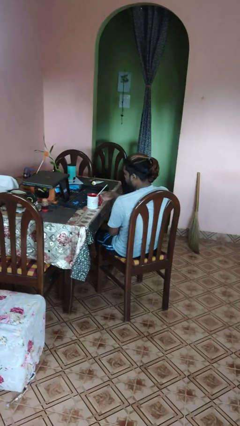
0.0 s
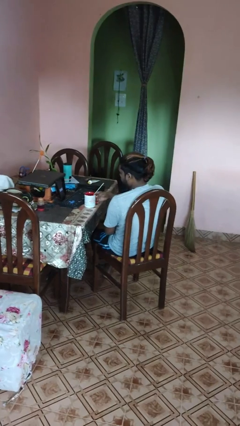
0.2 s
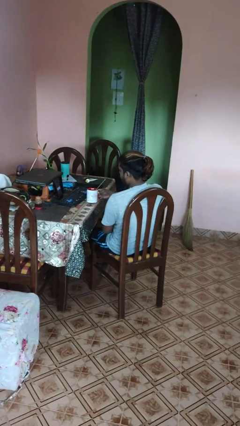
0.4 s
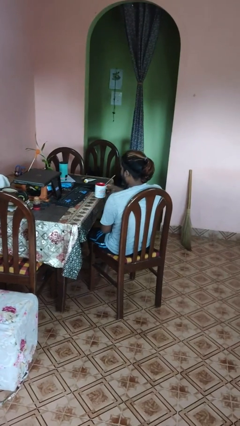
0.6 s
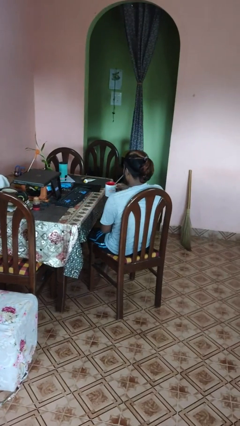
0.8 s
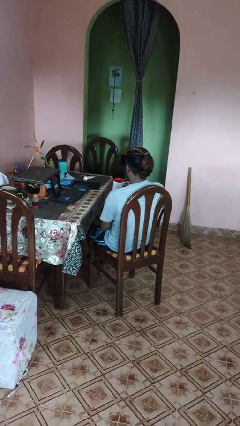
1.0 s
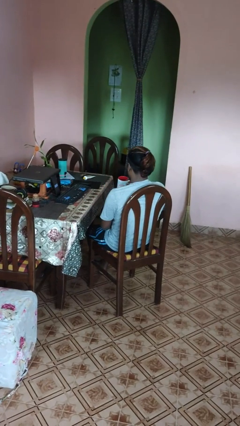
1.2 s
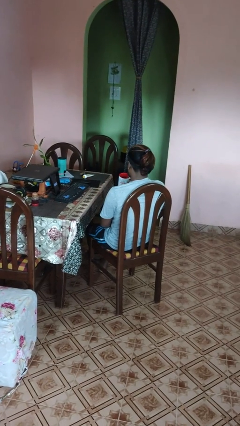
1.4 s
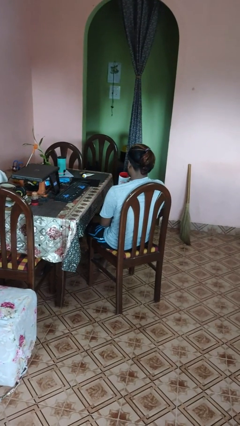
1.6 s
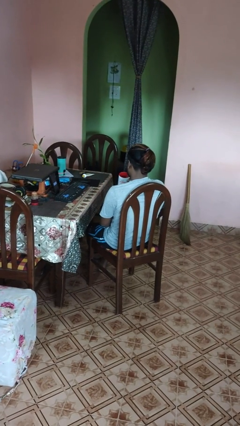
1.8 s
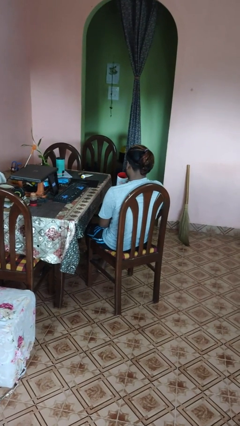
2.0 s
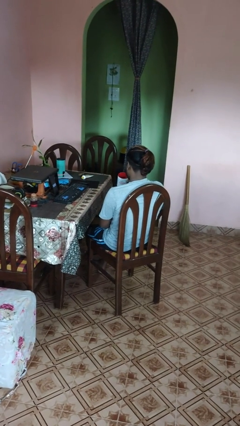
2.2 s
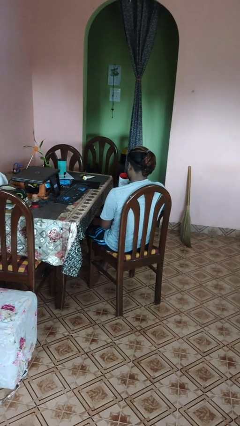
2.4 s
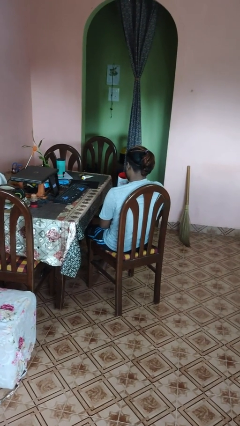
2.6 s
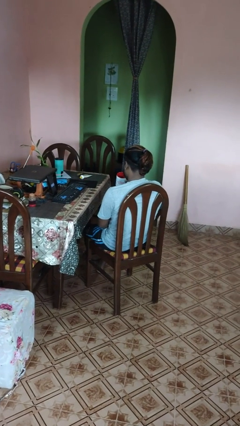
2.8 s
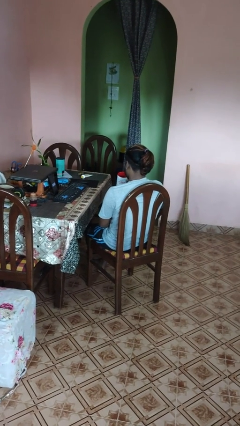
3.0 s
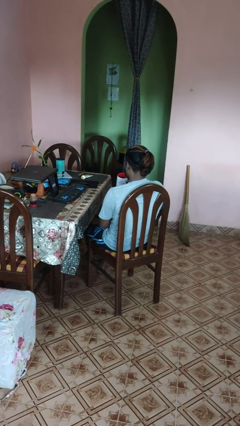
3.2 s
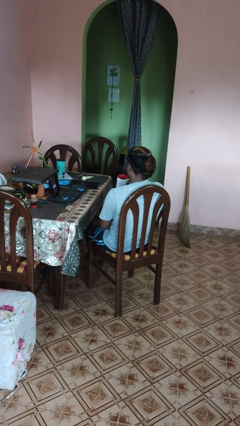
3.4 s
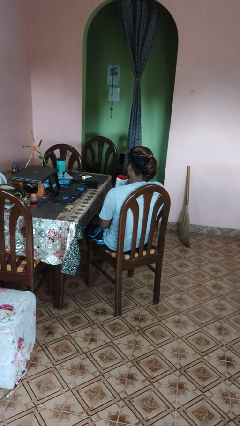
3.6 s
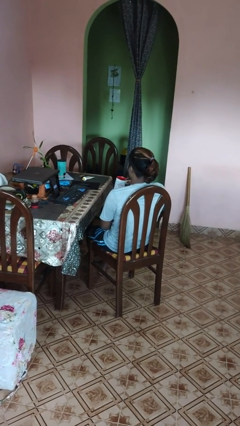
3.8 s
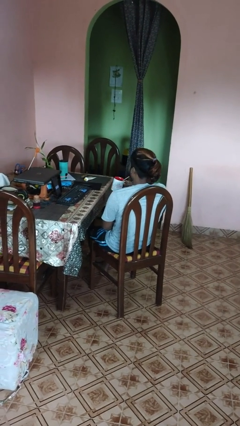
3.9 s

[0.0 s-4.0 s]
person drinks from straw

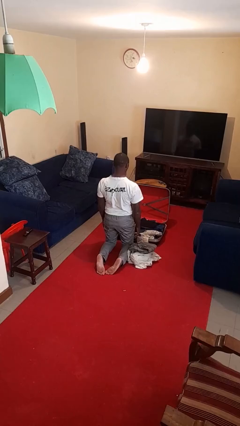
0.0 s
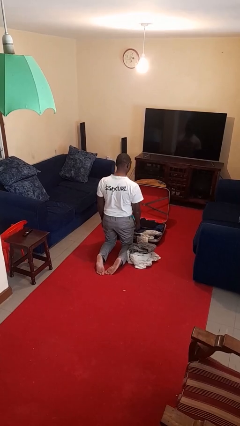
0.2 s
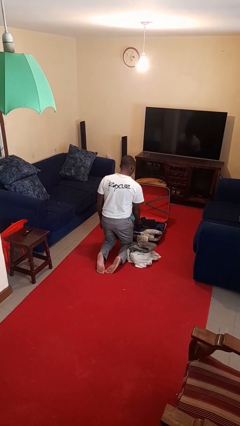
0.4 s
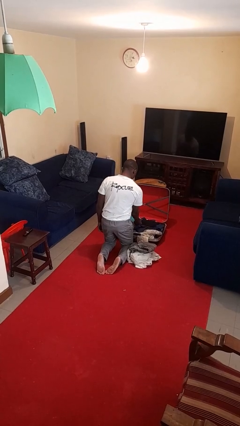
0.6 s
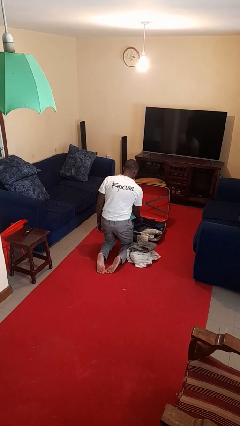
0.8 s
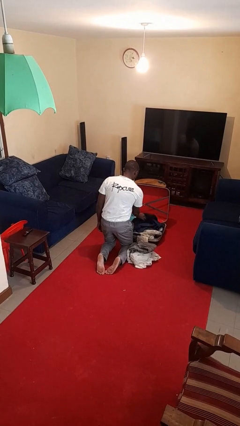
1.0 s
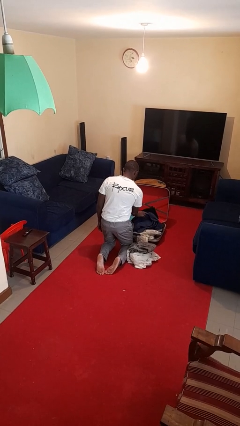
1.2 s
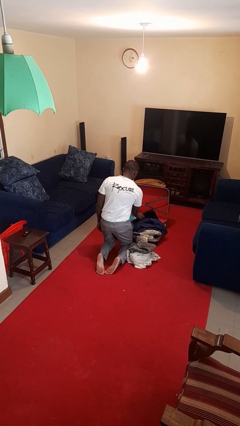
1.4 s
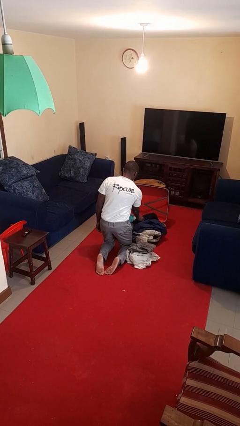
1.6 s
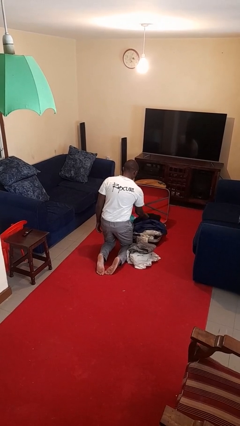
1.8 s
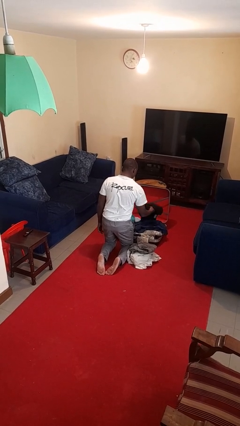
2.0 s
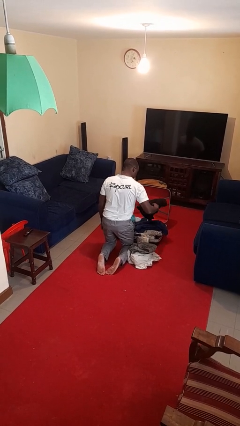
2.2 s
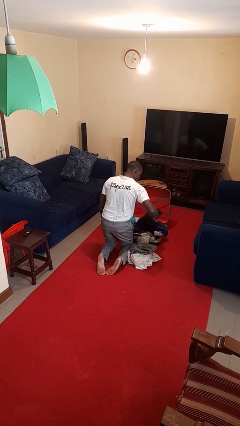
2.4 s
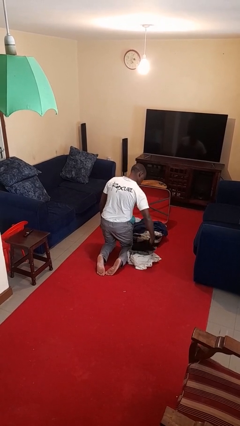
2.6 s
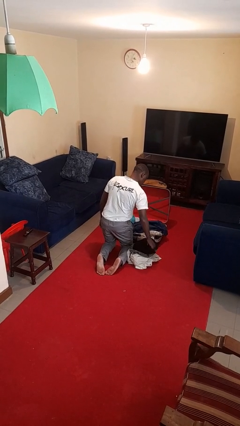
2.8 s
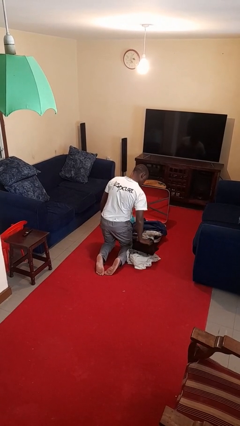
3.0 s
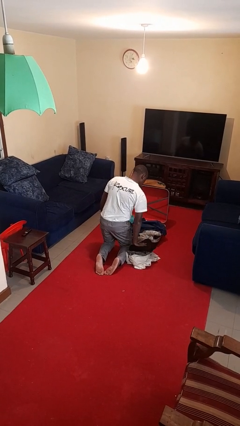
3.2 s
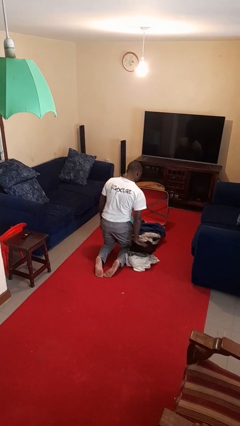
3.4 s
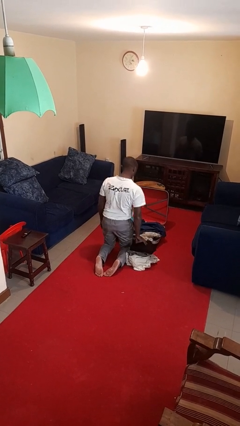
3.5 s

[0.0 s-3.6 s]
person unloads clothes from suitcase

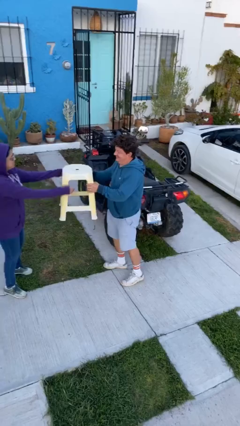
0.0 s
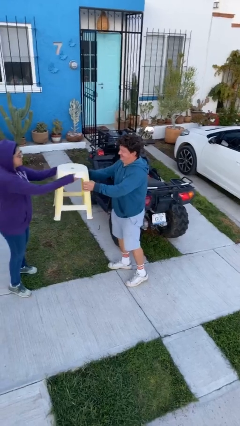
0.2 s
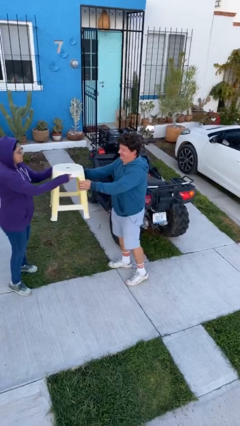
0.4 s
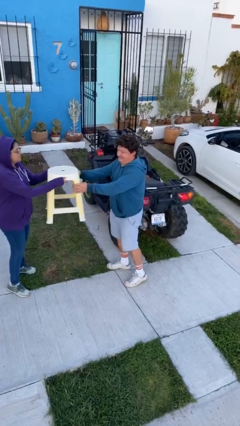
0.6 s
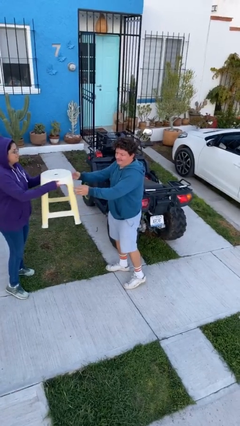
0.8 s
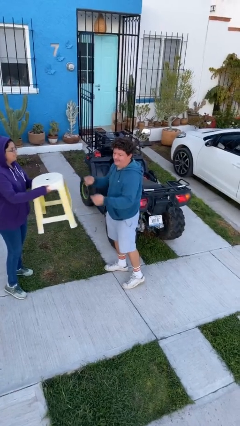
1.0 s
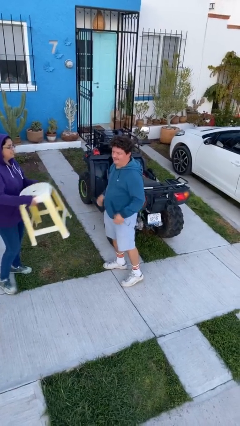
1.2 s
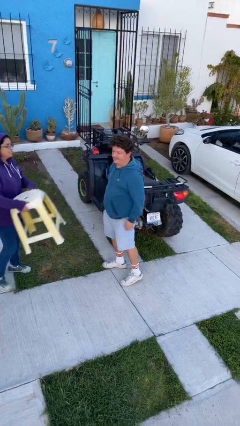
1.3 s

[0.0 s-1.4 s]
person transfers object to person

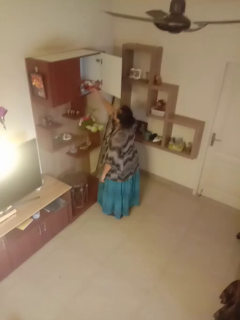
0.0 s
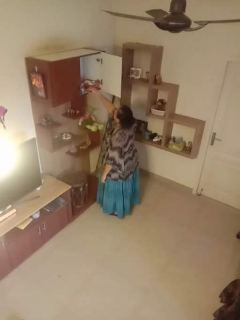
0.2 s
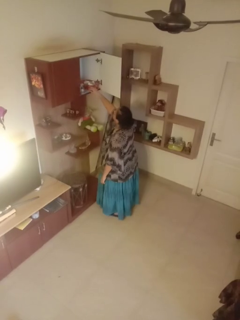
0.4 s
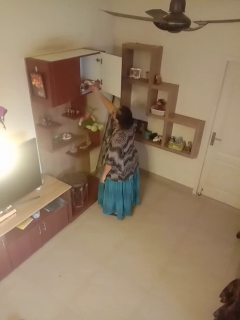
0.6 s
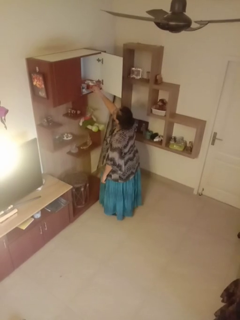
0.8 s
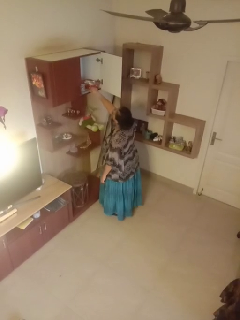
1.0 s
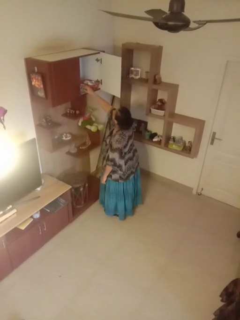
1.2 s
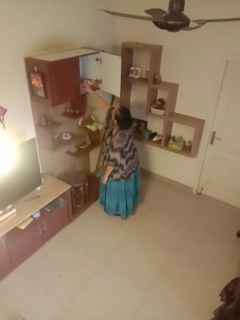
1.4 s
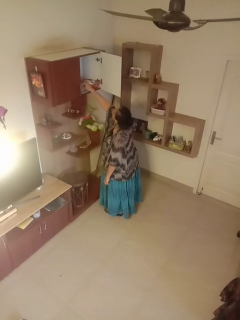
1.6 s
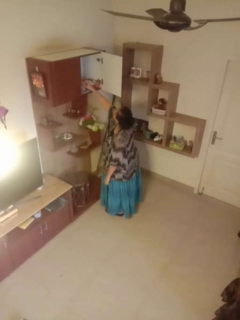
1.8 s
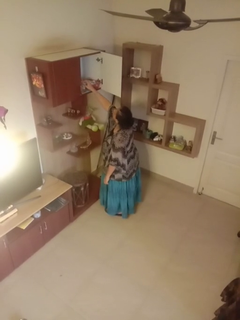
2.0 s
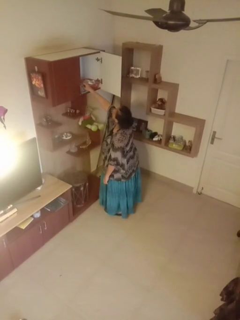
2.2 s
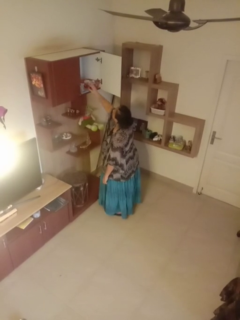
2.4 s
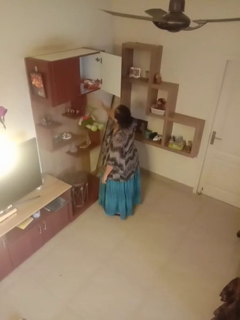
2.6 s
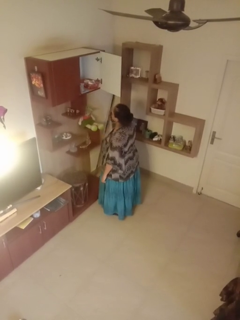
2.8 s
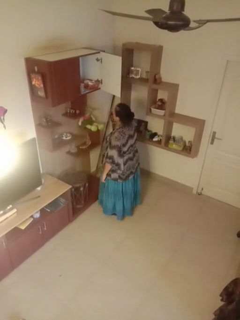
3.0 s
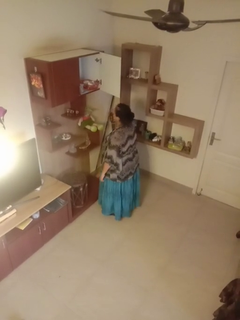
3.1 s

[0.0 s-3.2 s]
person searches in cabinet

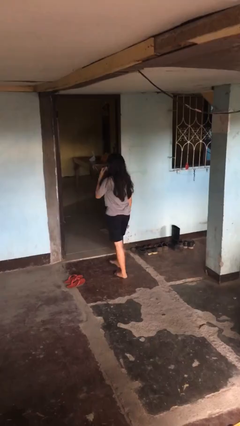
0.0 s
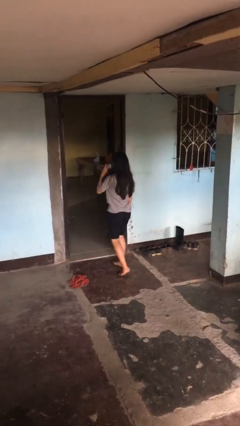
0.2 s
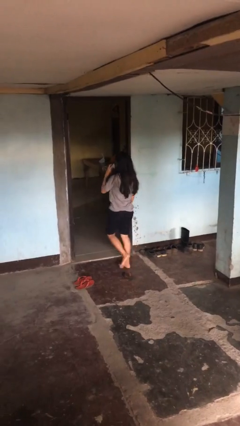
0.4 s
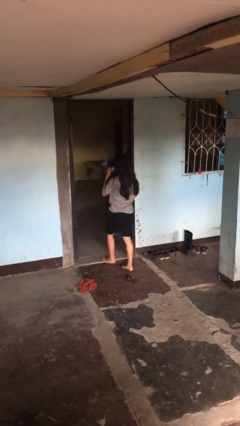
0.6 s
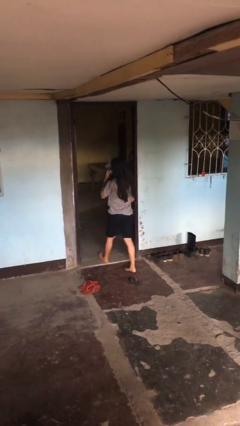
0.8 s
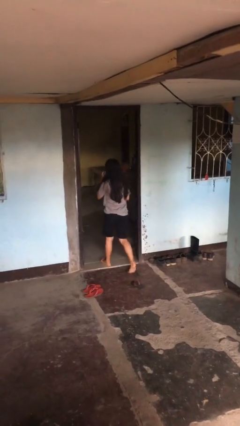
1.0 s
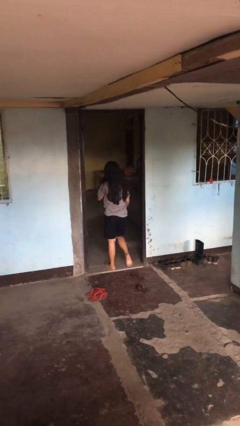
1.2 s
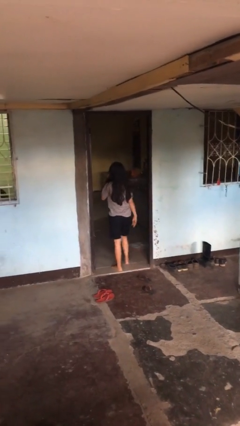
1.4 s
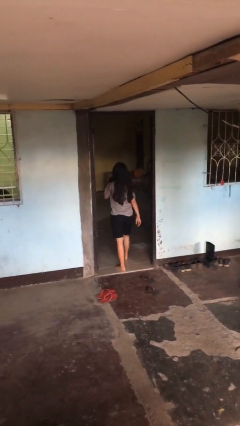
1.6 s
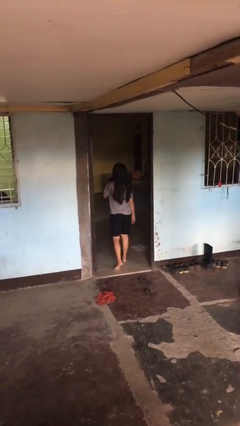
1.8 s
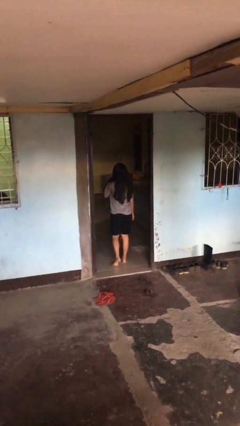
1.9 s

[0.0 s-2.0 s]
person exits scene through structure

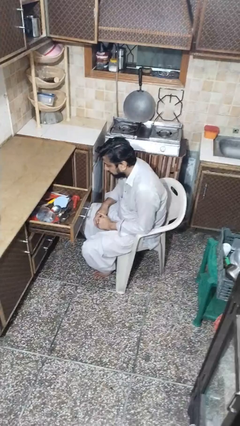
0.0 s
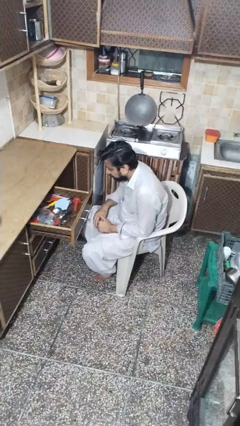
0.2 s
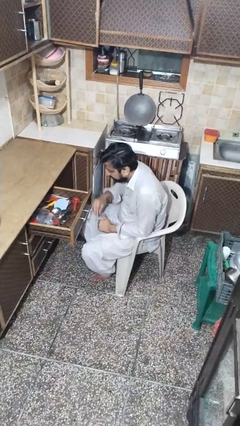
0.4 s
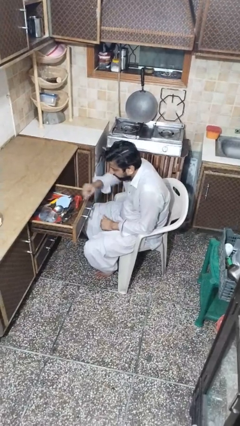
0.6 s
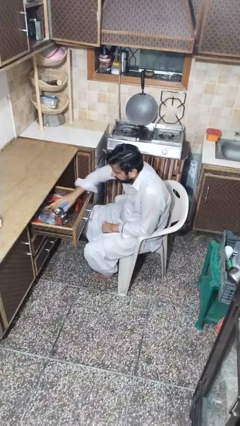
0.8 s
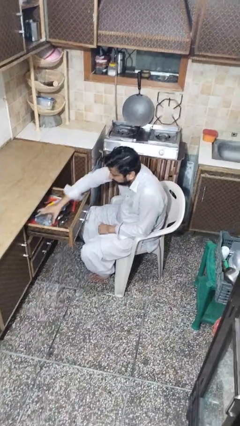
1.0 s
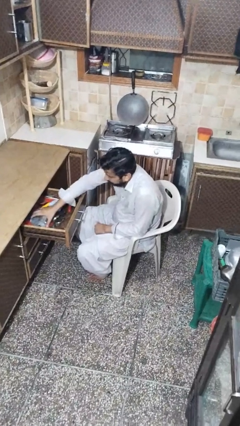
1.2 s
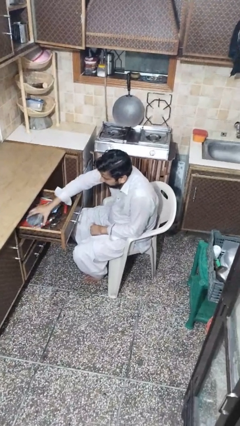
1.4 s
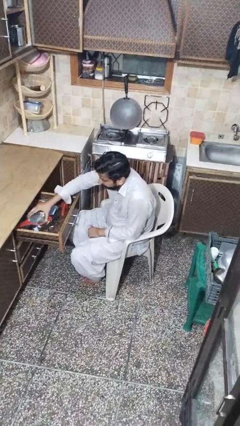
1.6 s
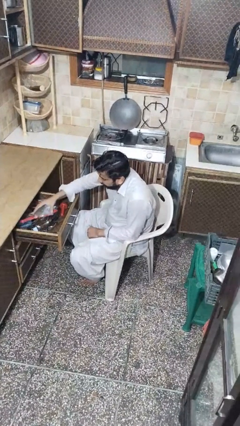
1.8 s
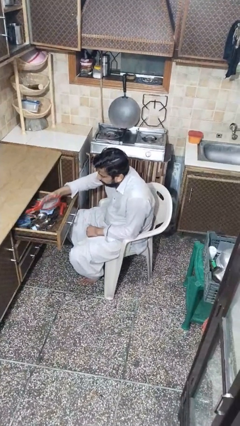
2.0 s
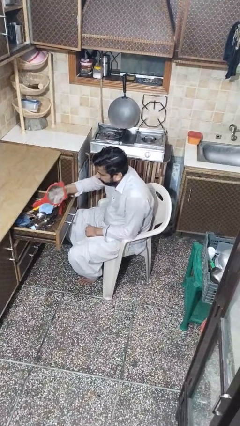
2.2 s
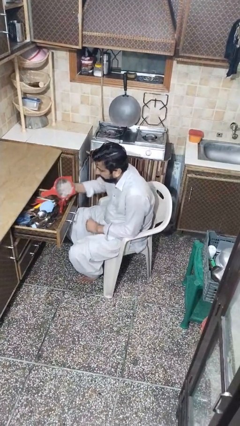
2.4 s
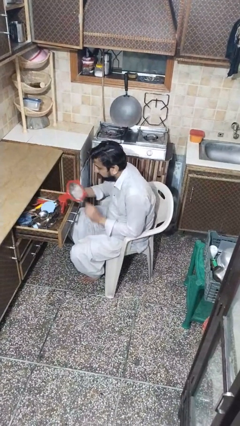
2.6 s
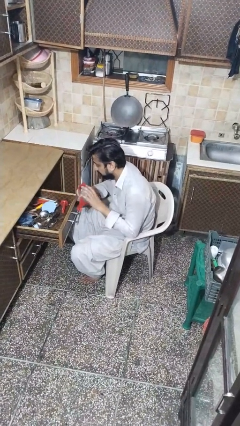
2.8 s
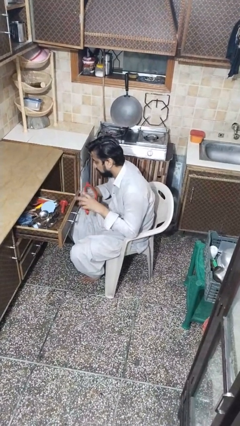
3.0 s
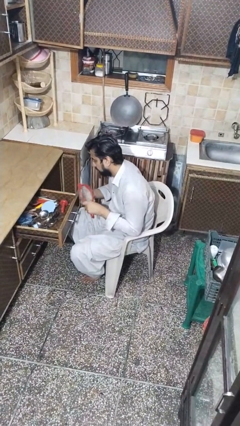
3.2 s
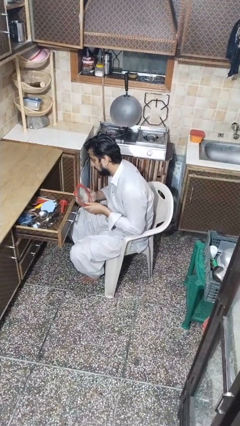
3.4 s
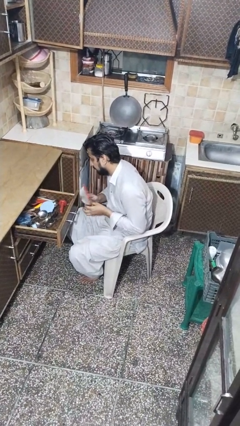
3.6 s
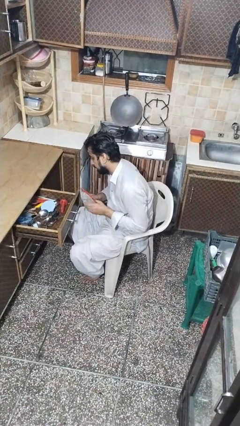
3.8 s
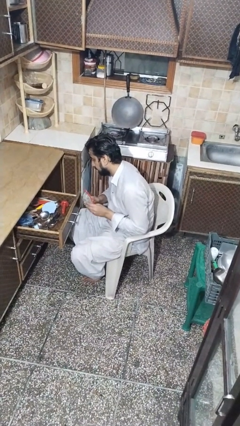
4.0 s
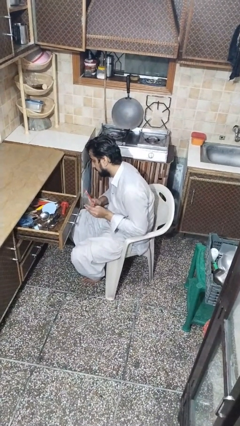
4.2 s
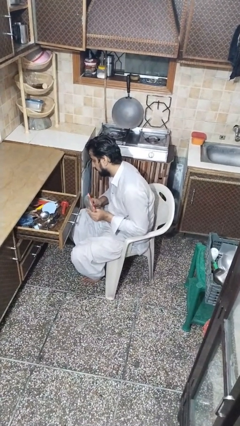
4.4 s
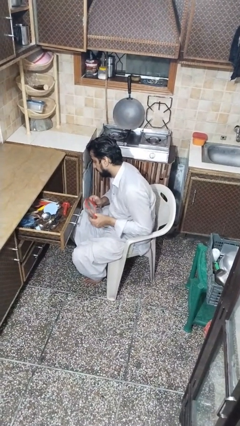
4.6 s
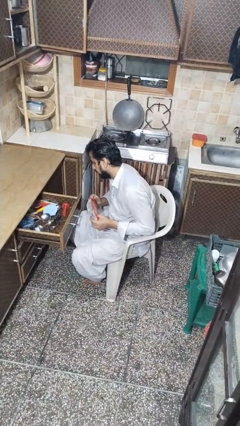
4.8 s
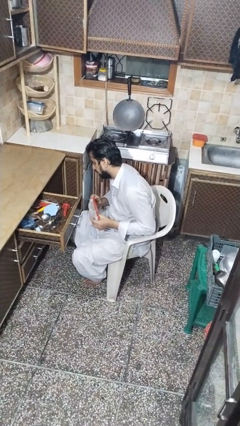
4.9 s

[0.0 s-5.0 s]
person takes object from kitchen drawer
